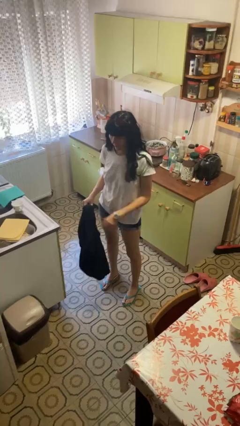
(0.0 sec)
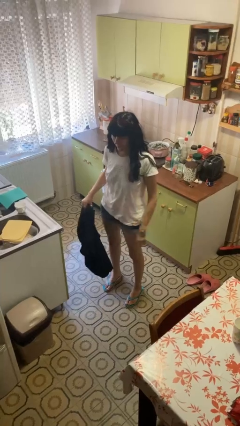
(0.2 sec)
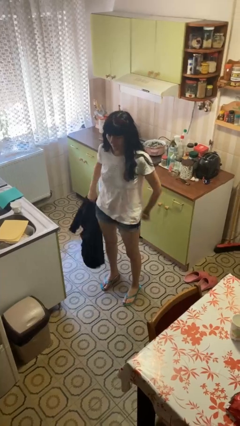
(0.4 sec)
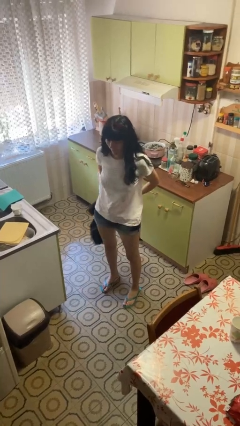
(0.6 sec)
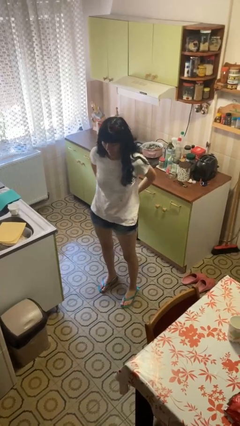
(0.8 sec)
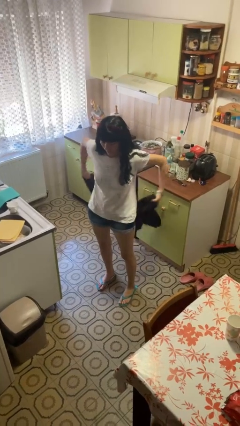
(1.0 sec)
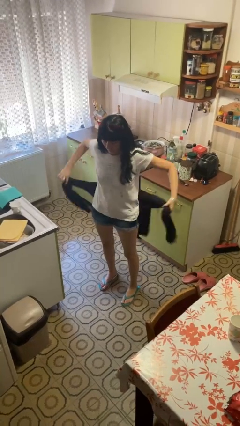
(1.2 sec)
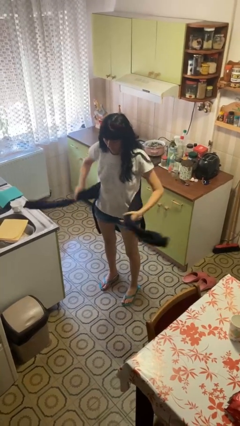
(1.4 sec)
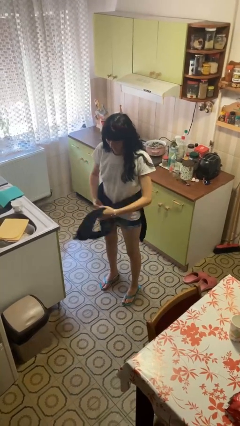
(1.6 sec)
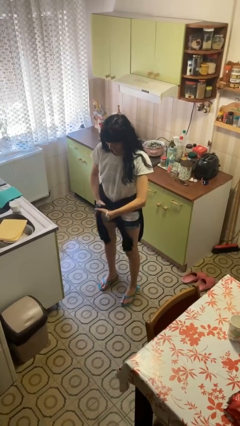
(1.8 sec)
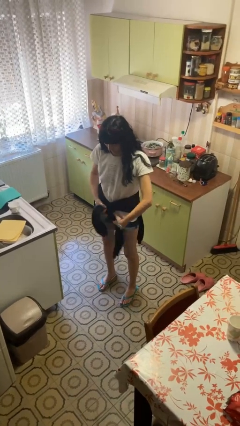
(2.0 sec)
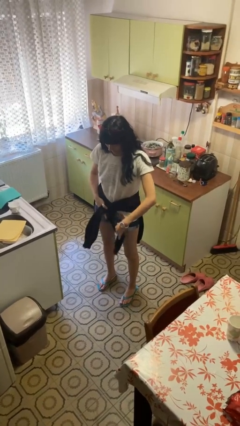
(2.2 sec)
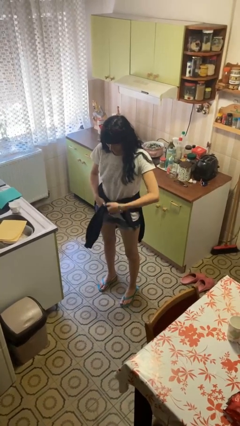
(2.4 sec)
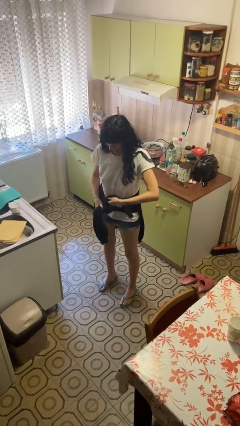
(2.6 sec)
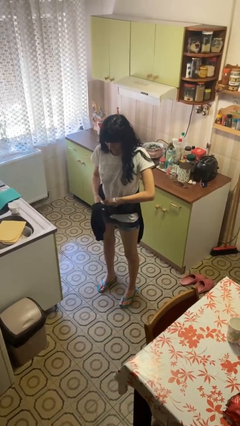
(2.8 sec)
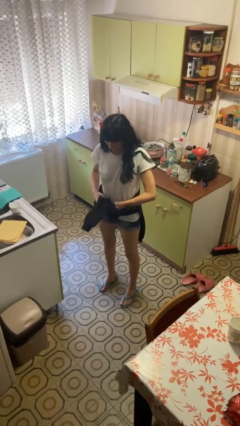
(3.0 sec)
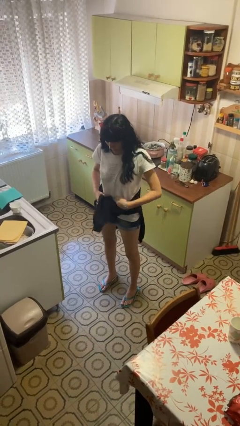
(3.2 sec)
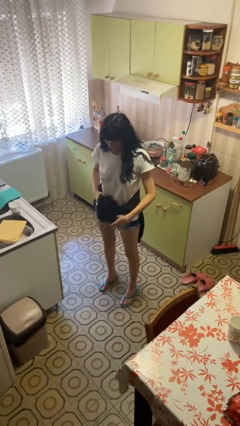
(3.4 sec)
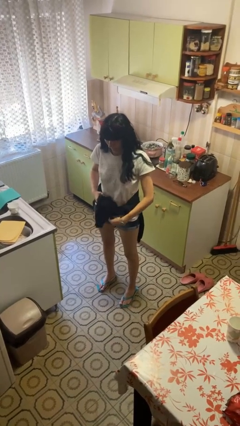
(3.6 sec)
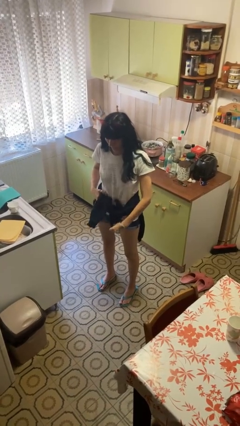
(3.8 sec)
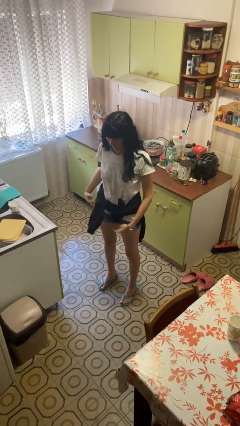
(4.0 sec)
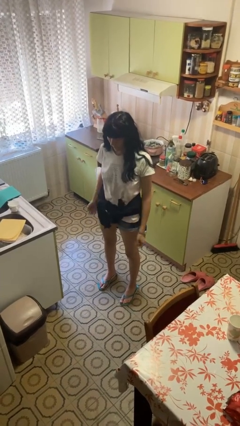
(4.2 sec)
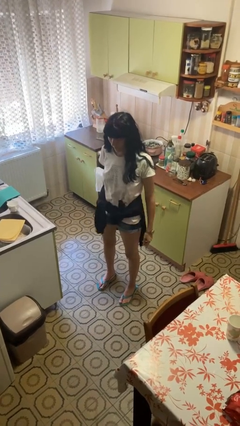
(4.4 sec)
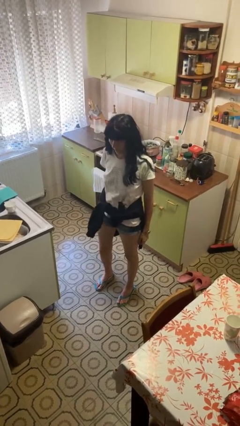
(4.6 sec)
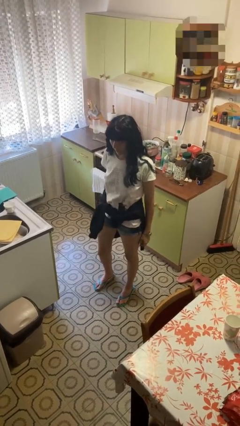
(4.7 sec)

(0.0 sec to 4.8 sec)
person ties jacket around waist

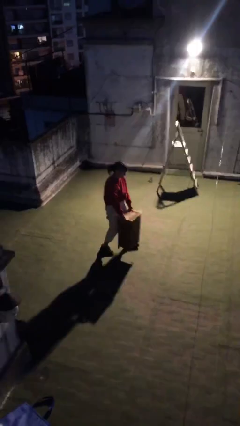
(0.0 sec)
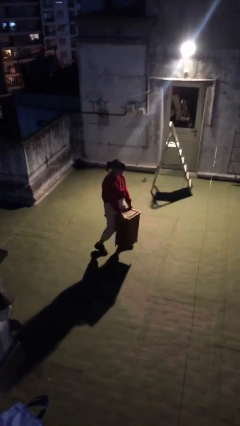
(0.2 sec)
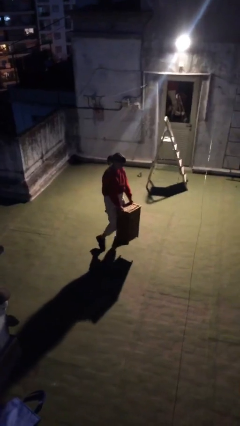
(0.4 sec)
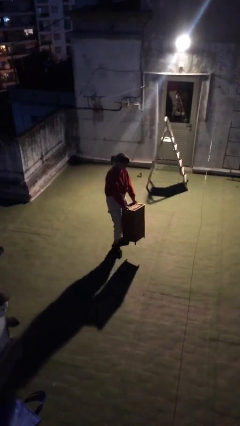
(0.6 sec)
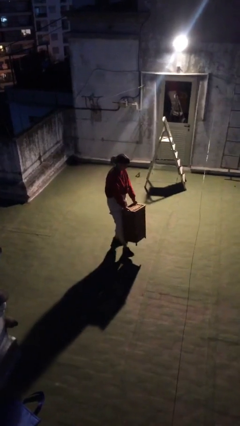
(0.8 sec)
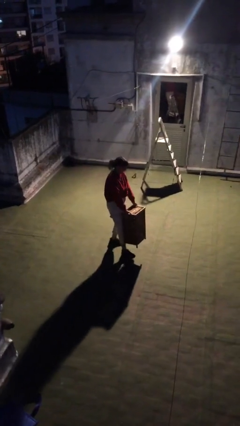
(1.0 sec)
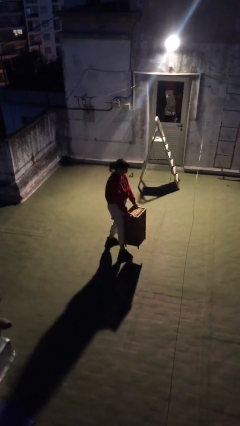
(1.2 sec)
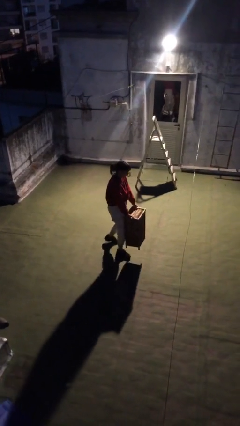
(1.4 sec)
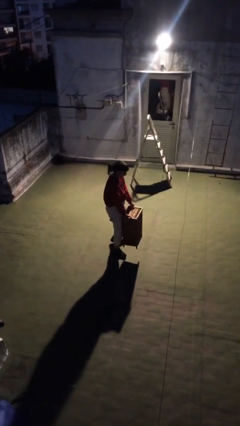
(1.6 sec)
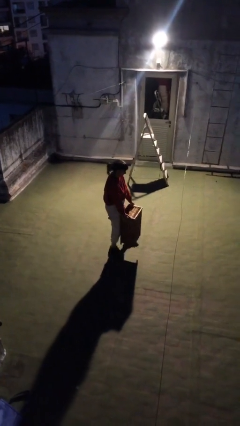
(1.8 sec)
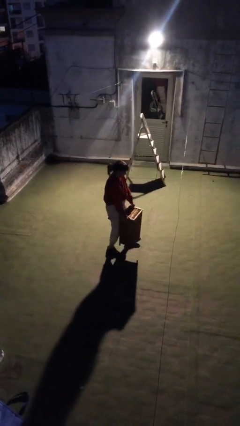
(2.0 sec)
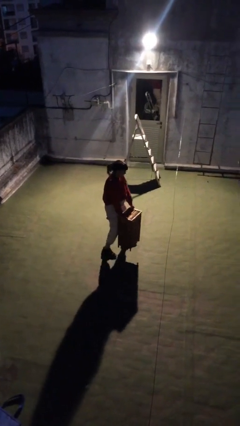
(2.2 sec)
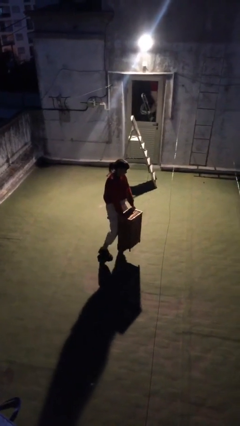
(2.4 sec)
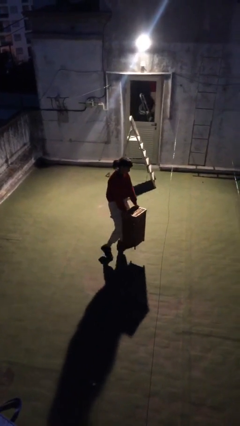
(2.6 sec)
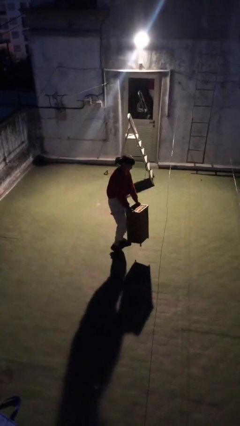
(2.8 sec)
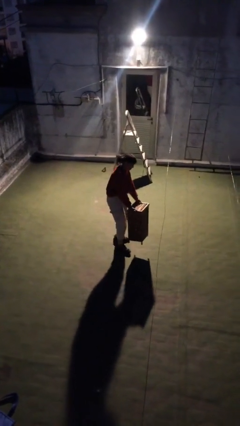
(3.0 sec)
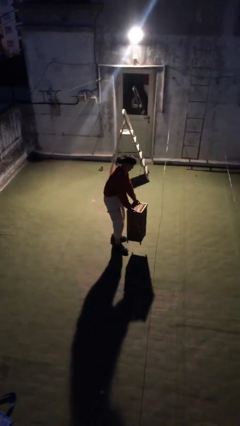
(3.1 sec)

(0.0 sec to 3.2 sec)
person carries heavy object

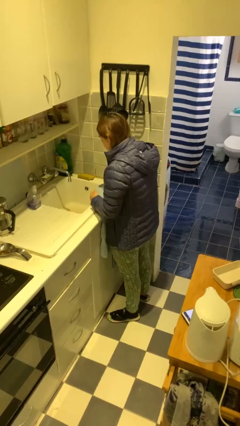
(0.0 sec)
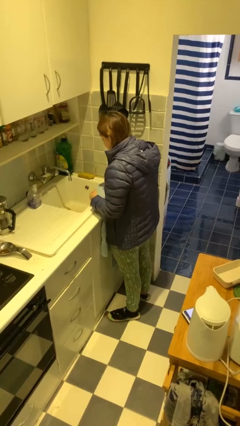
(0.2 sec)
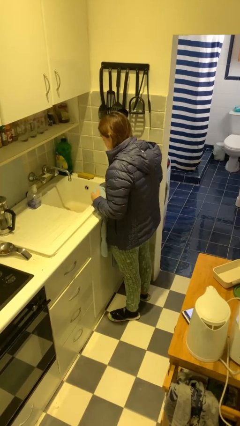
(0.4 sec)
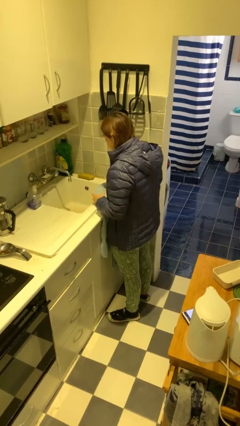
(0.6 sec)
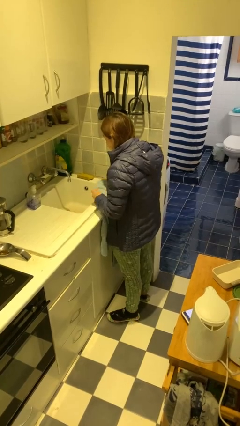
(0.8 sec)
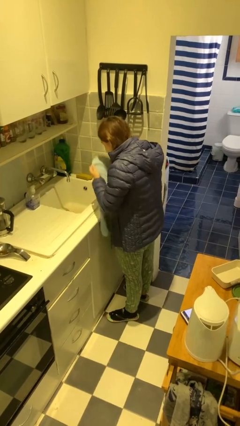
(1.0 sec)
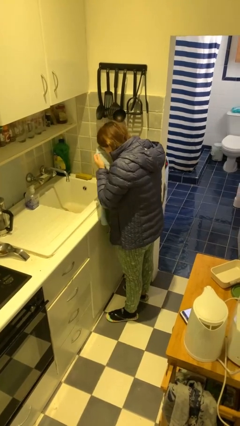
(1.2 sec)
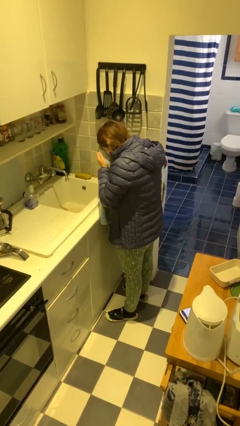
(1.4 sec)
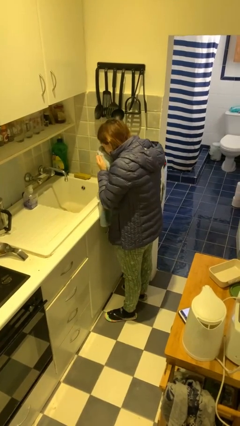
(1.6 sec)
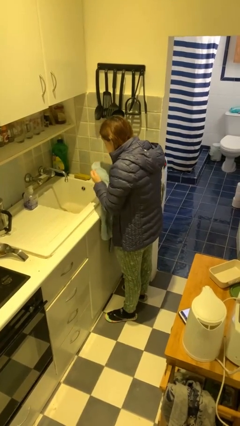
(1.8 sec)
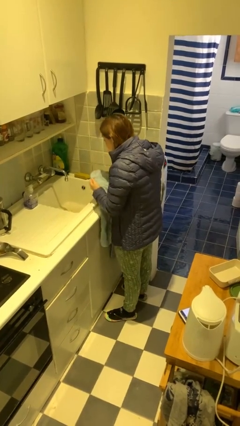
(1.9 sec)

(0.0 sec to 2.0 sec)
person dries face with towel

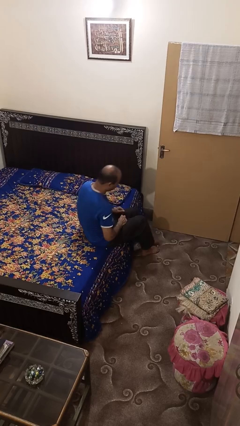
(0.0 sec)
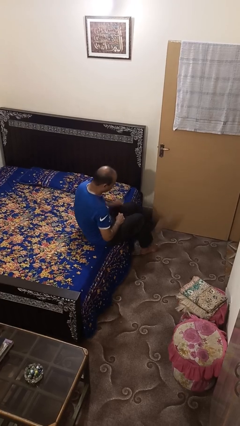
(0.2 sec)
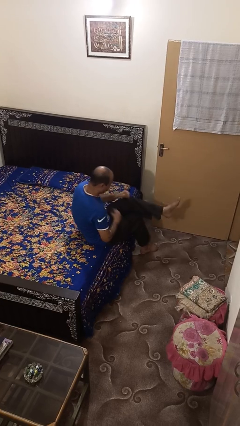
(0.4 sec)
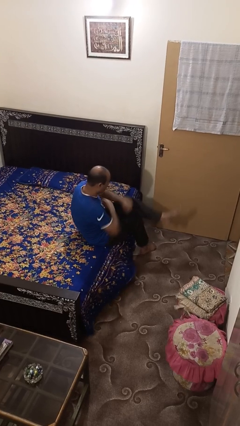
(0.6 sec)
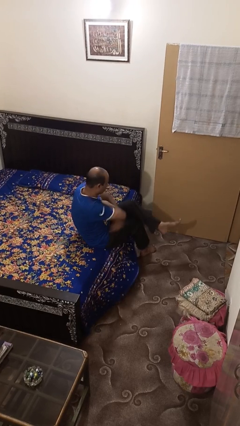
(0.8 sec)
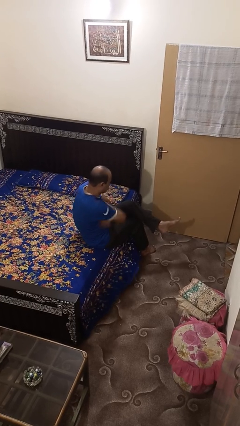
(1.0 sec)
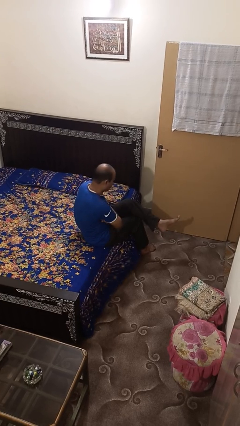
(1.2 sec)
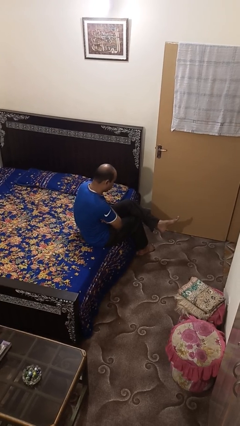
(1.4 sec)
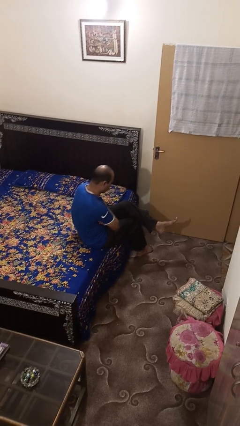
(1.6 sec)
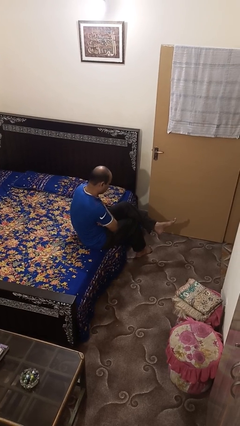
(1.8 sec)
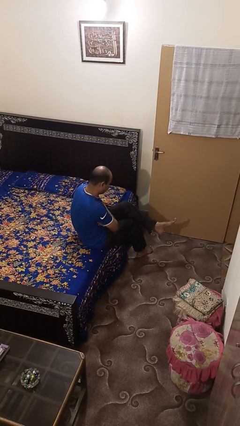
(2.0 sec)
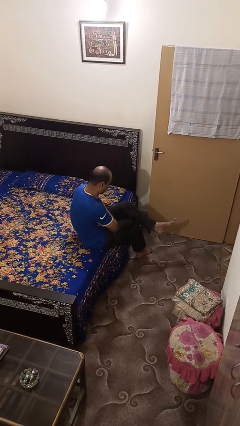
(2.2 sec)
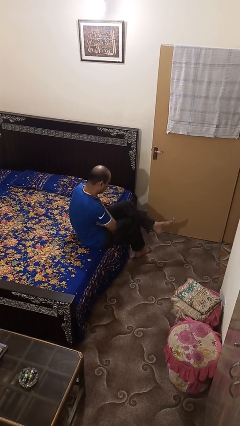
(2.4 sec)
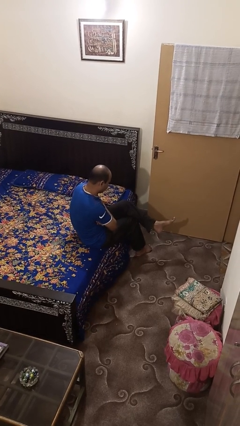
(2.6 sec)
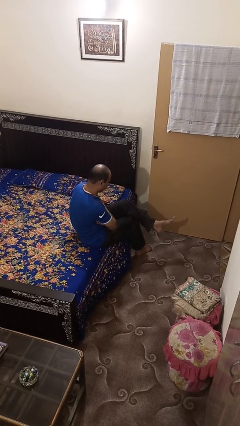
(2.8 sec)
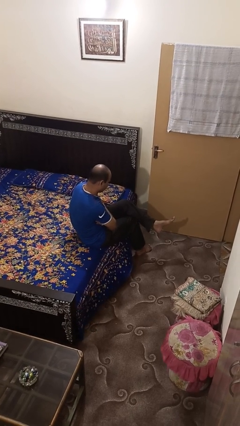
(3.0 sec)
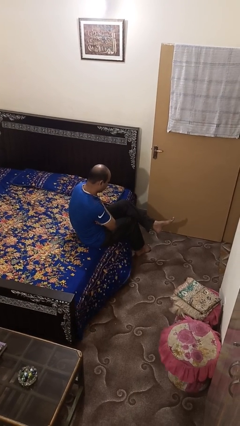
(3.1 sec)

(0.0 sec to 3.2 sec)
person crosses legs

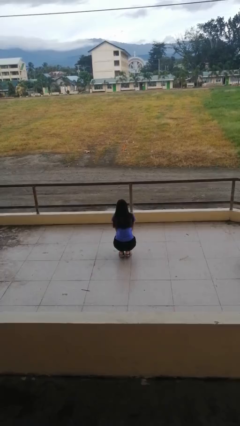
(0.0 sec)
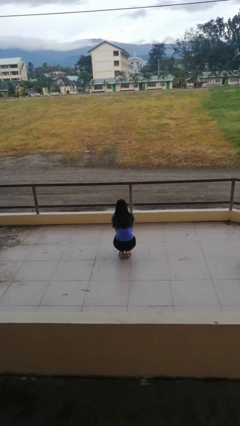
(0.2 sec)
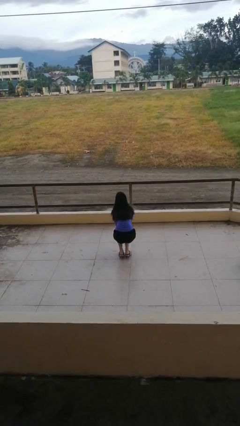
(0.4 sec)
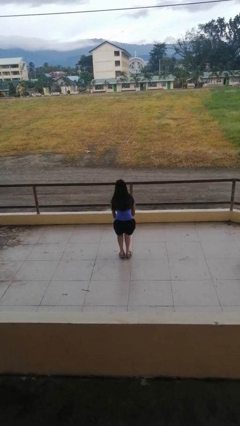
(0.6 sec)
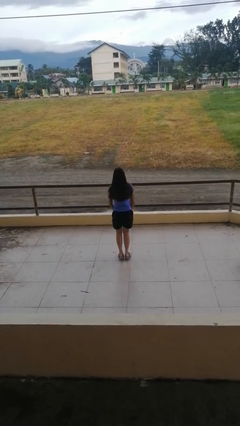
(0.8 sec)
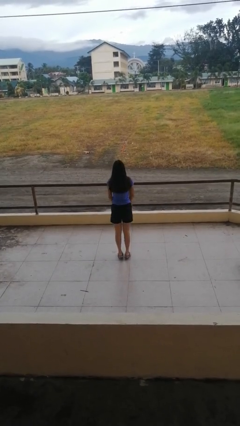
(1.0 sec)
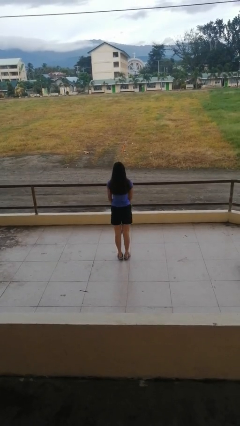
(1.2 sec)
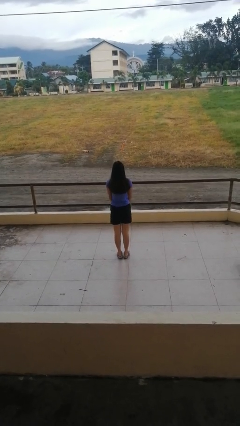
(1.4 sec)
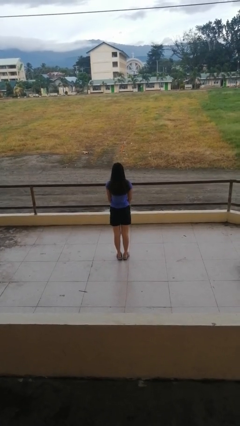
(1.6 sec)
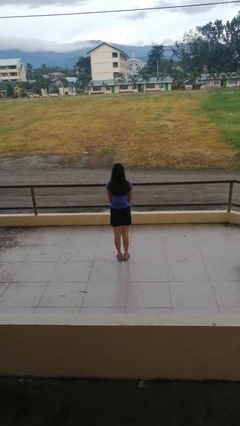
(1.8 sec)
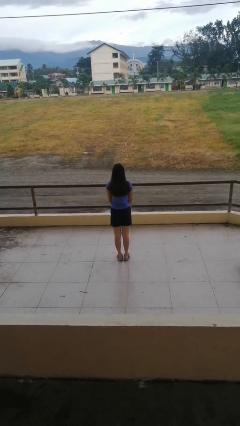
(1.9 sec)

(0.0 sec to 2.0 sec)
person stands up

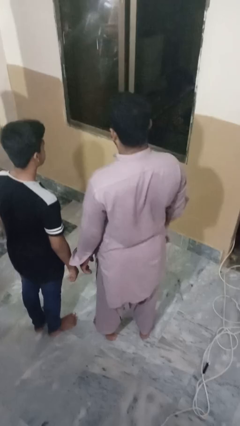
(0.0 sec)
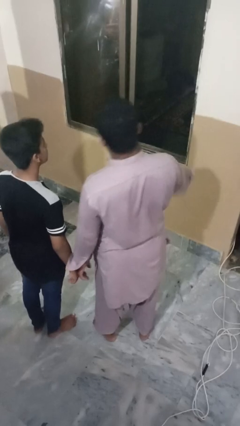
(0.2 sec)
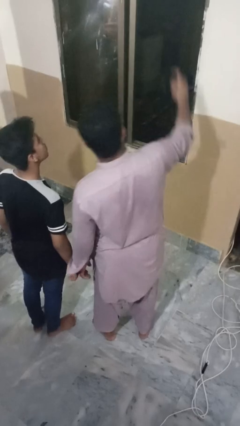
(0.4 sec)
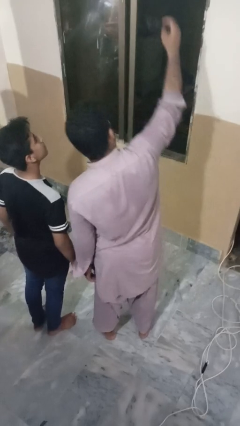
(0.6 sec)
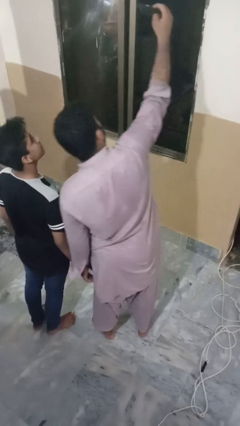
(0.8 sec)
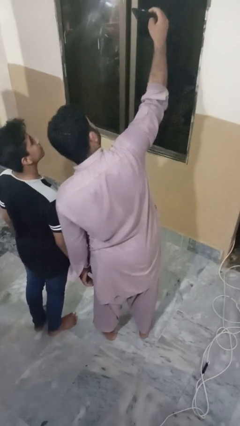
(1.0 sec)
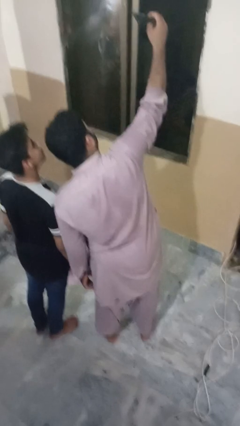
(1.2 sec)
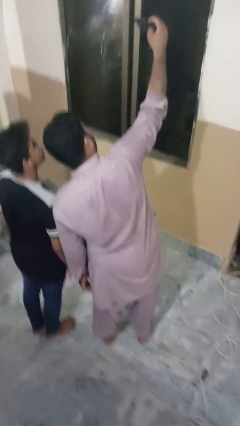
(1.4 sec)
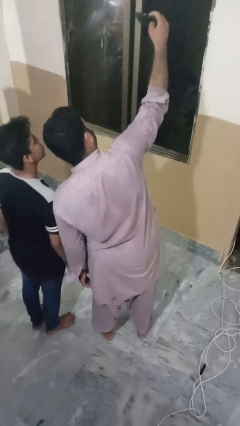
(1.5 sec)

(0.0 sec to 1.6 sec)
person takes selfie with person

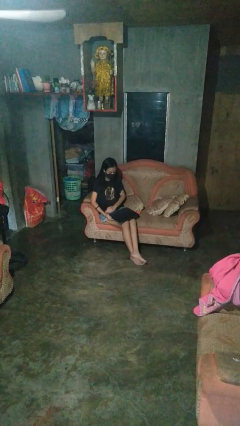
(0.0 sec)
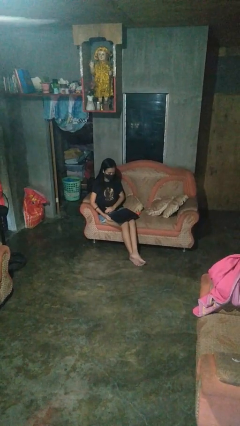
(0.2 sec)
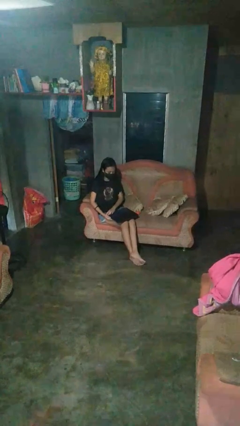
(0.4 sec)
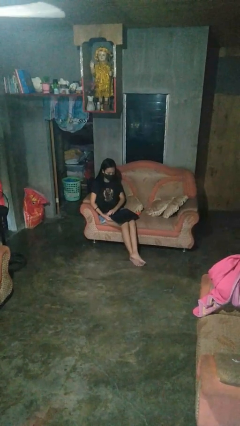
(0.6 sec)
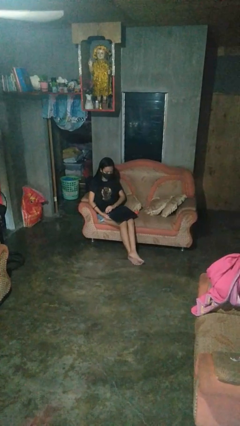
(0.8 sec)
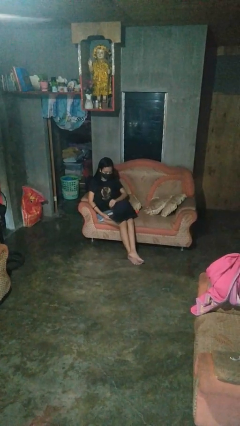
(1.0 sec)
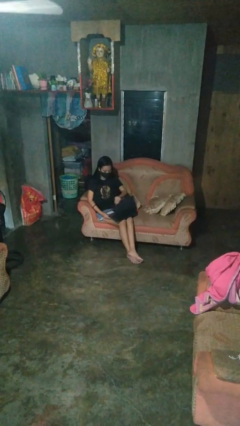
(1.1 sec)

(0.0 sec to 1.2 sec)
person opens laptop
